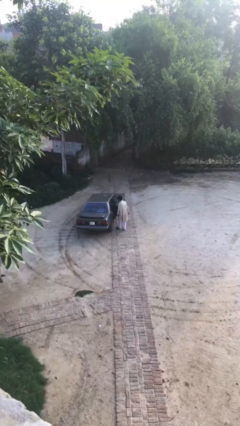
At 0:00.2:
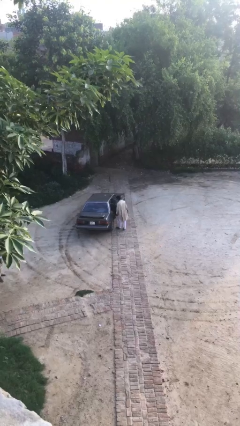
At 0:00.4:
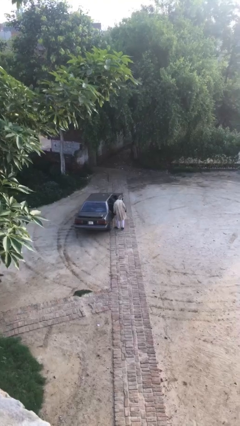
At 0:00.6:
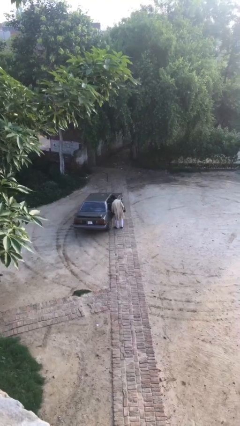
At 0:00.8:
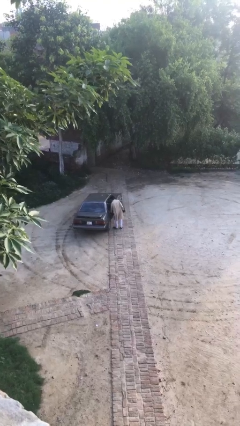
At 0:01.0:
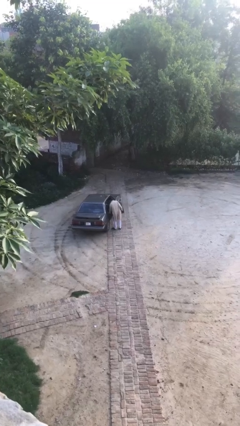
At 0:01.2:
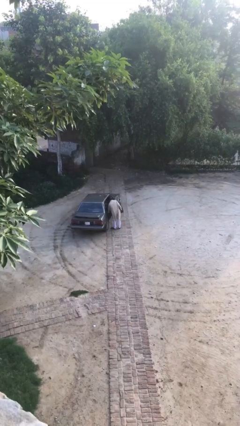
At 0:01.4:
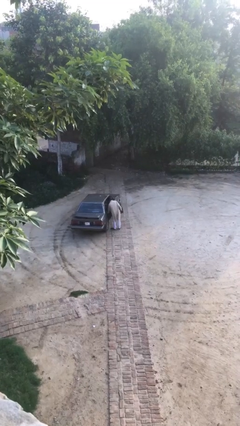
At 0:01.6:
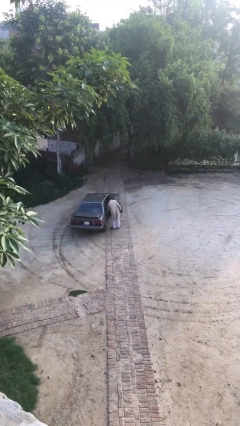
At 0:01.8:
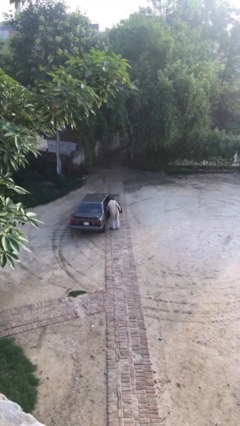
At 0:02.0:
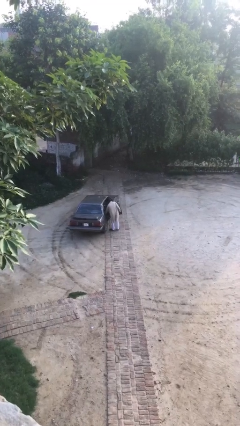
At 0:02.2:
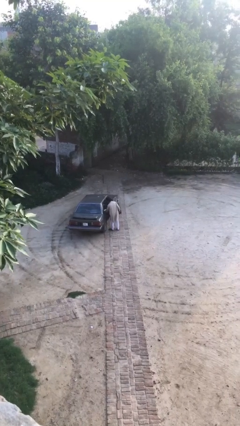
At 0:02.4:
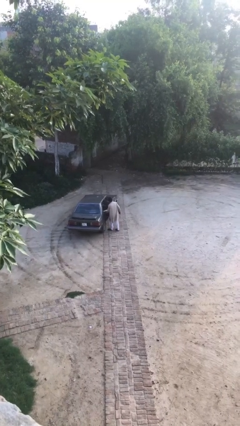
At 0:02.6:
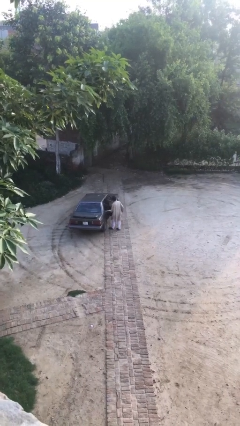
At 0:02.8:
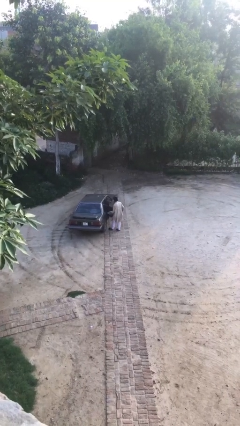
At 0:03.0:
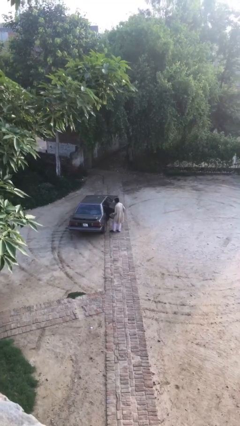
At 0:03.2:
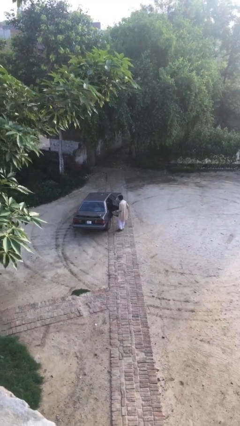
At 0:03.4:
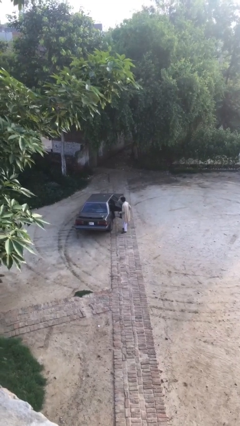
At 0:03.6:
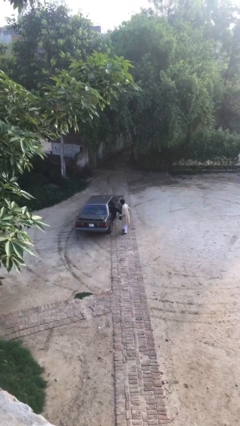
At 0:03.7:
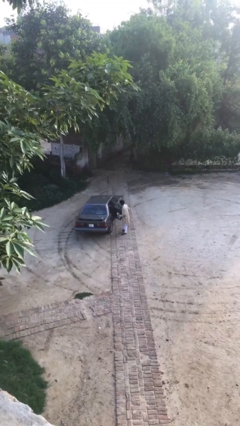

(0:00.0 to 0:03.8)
person unloads car

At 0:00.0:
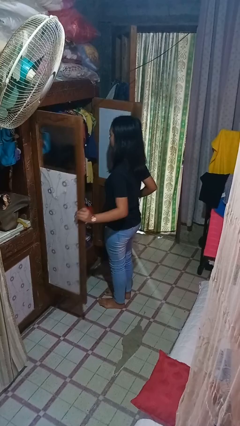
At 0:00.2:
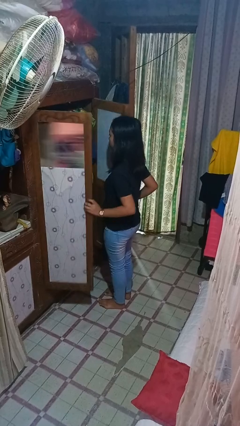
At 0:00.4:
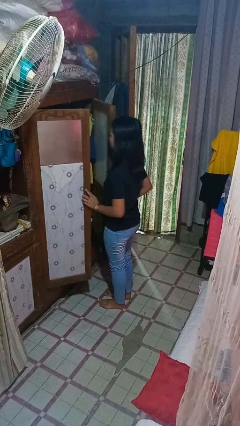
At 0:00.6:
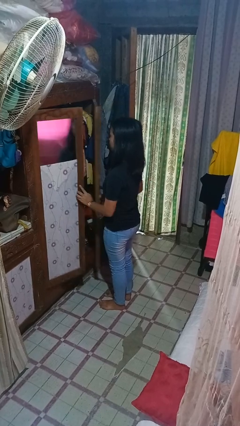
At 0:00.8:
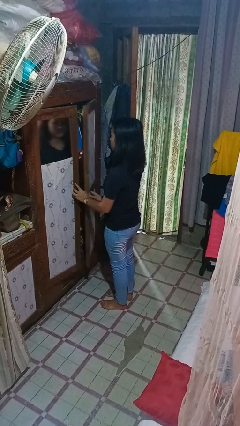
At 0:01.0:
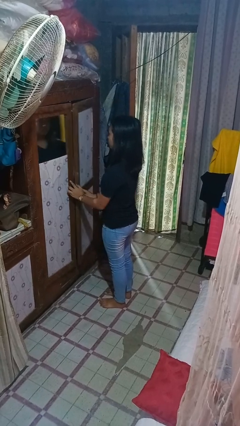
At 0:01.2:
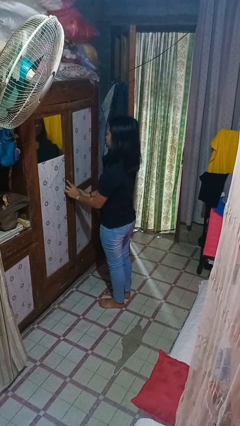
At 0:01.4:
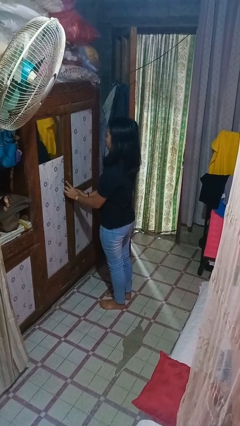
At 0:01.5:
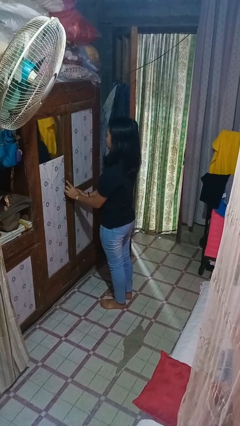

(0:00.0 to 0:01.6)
person closes closet door

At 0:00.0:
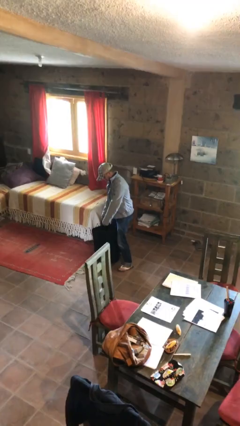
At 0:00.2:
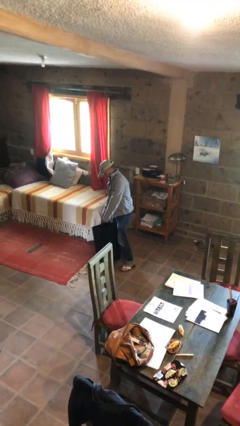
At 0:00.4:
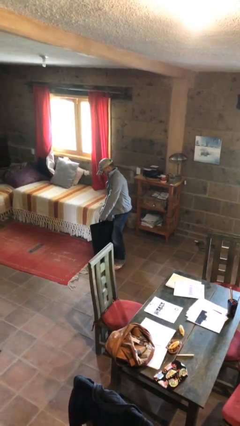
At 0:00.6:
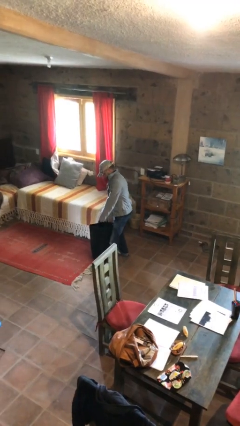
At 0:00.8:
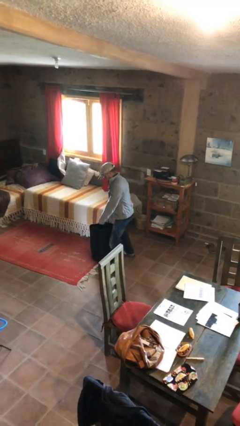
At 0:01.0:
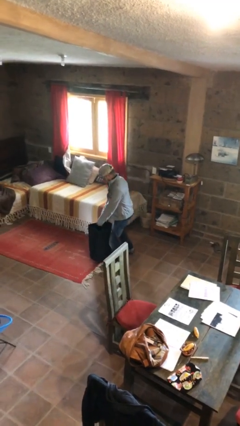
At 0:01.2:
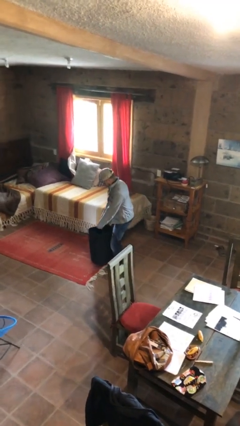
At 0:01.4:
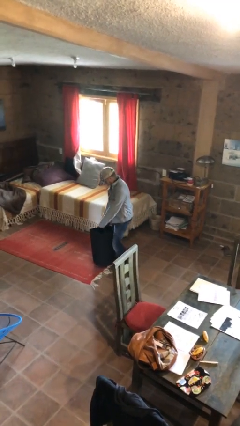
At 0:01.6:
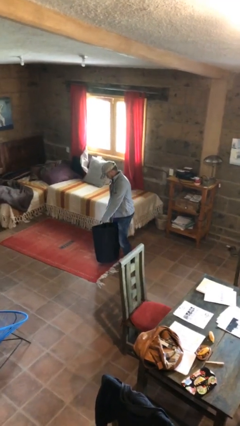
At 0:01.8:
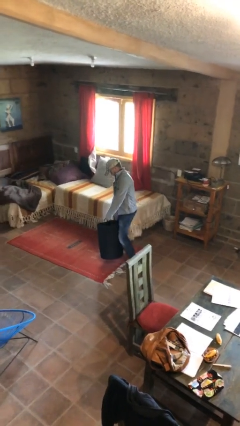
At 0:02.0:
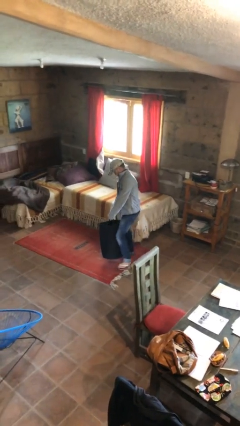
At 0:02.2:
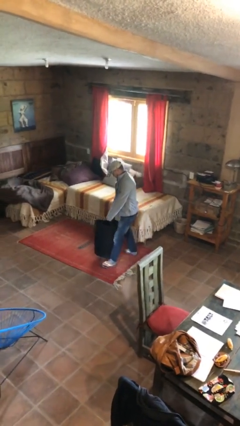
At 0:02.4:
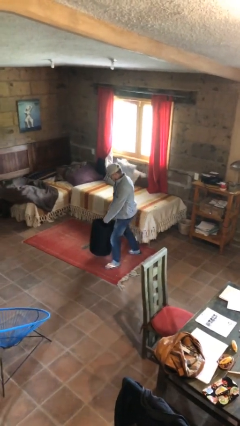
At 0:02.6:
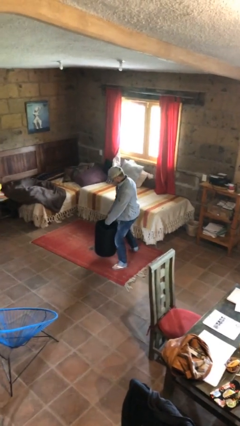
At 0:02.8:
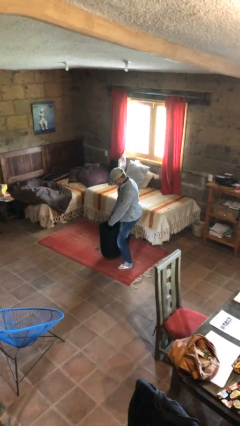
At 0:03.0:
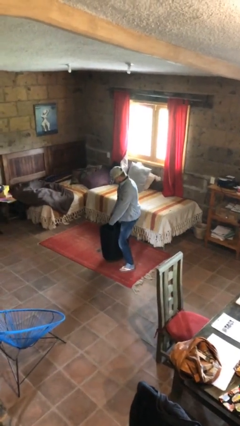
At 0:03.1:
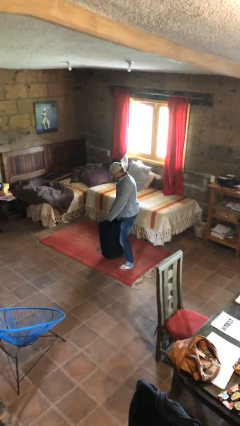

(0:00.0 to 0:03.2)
person carries heavy object

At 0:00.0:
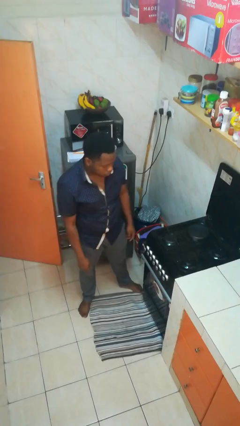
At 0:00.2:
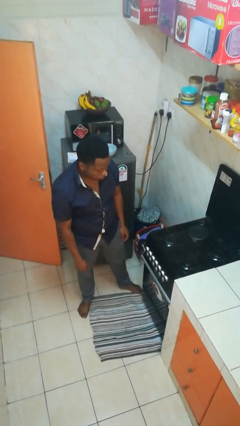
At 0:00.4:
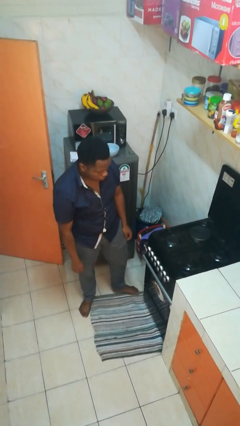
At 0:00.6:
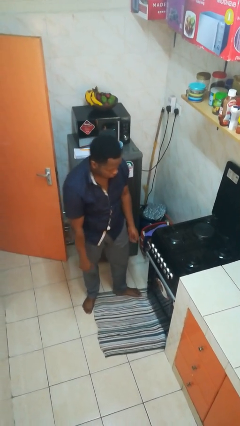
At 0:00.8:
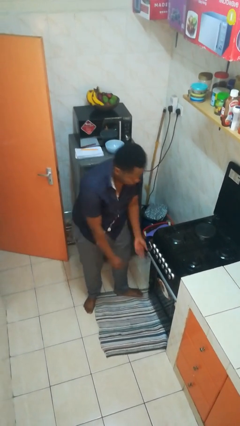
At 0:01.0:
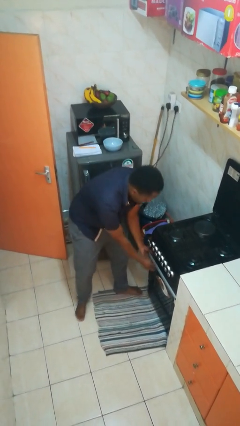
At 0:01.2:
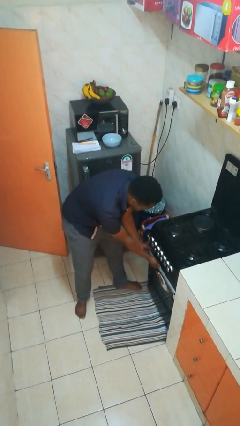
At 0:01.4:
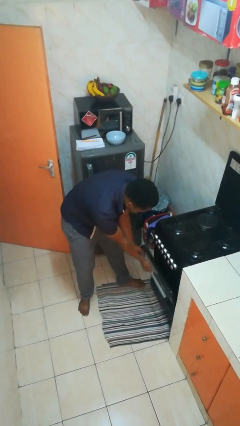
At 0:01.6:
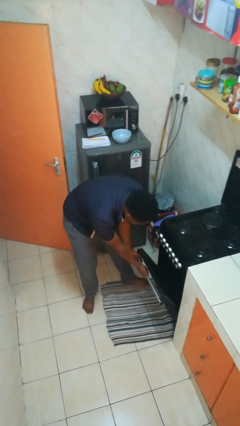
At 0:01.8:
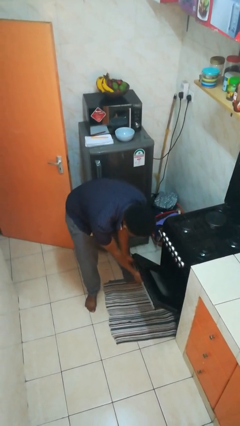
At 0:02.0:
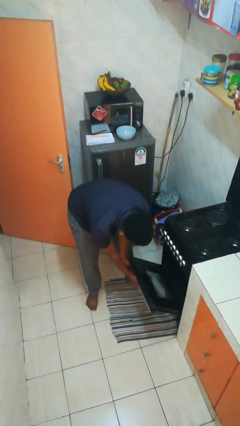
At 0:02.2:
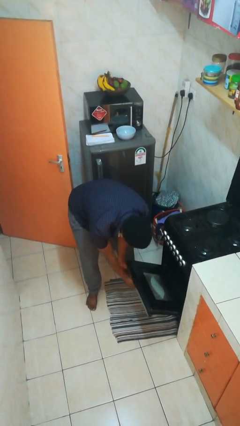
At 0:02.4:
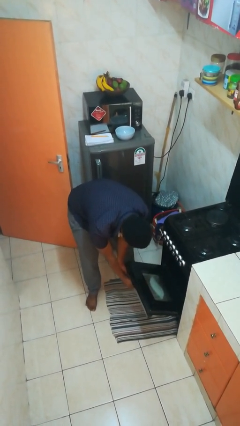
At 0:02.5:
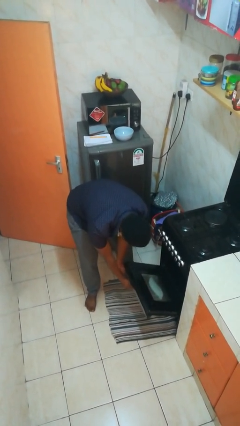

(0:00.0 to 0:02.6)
person opens oven door

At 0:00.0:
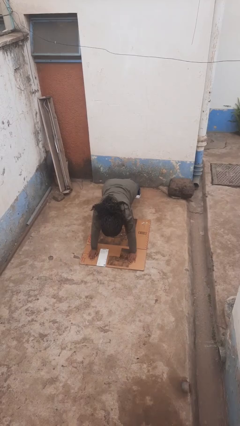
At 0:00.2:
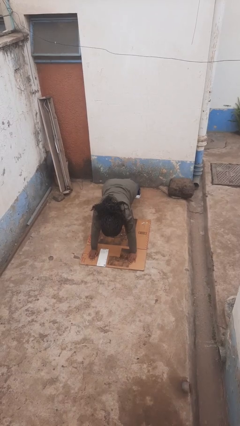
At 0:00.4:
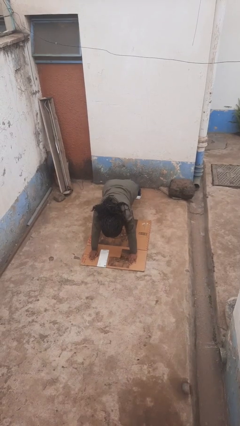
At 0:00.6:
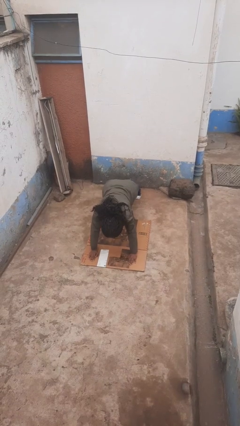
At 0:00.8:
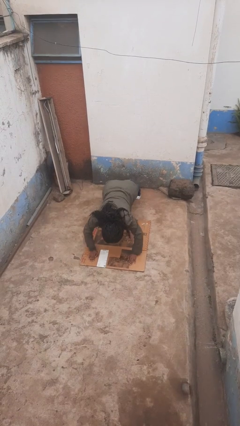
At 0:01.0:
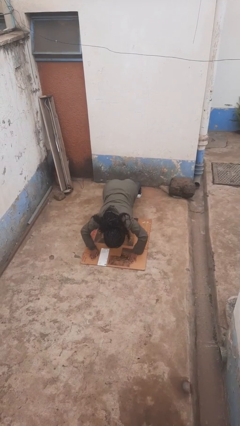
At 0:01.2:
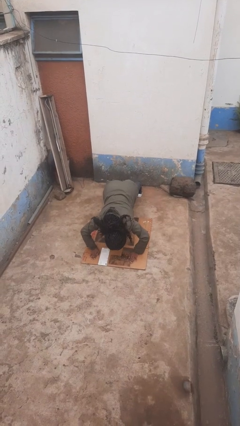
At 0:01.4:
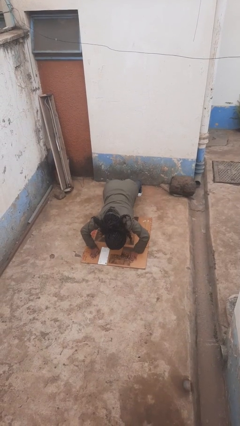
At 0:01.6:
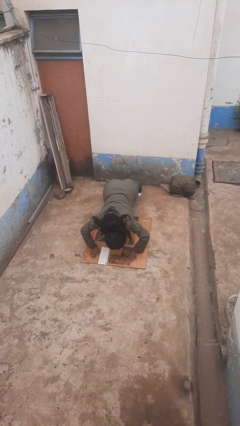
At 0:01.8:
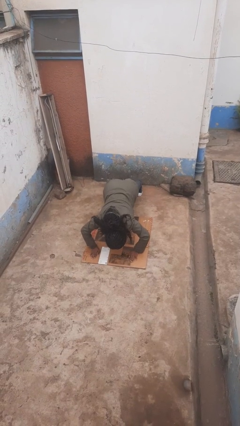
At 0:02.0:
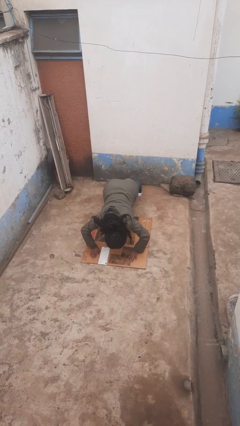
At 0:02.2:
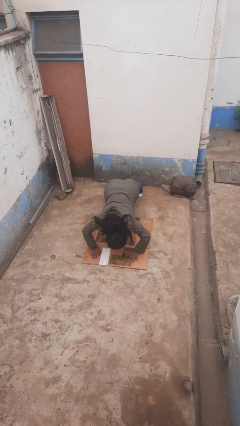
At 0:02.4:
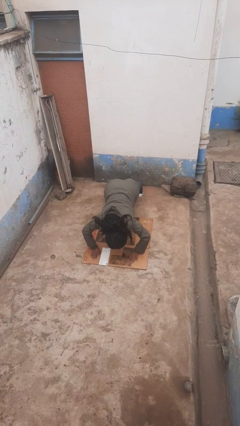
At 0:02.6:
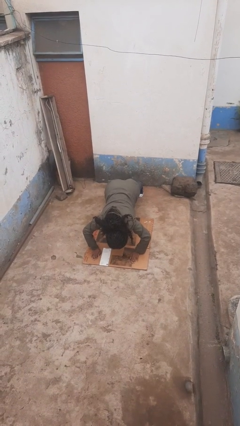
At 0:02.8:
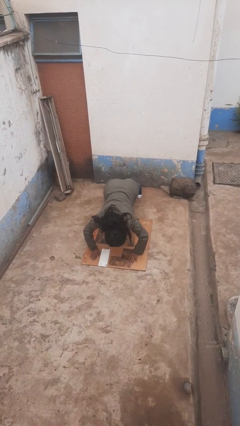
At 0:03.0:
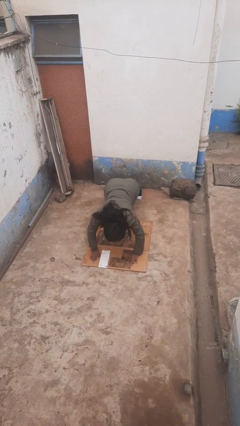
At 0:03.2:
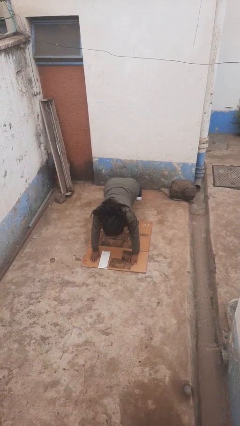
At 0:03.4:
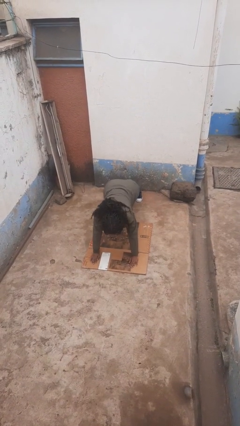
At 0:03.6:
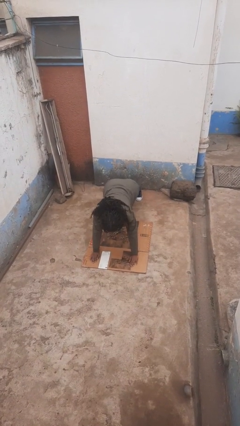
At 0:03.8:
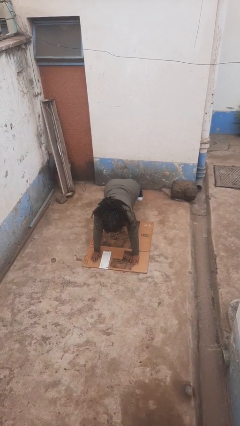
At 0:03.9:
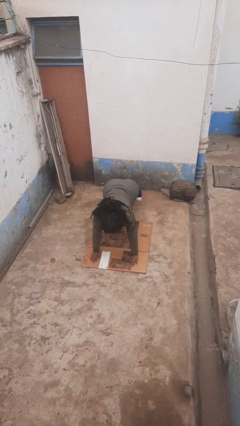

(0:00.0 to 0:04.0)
person exercises with pushup

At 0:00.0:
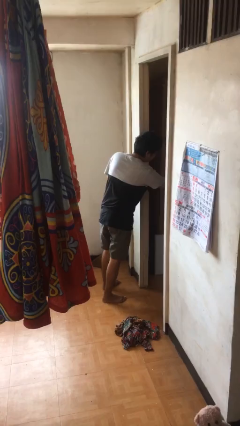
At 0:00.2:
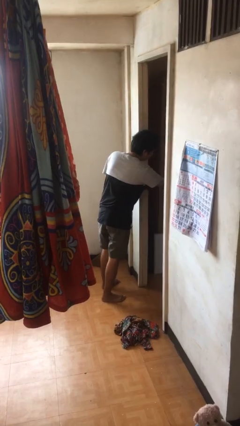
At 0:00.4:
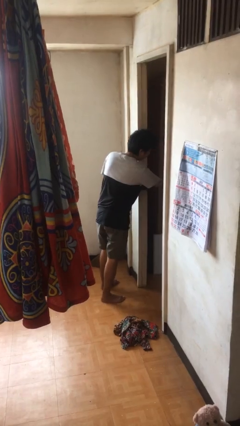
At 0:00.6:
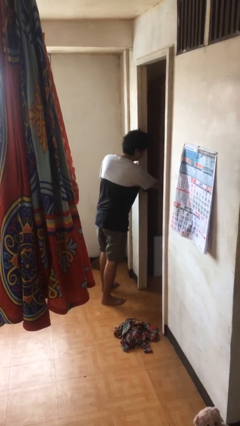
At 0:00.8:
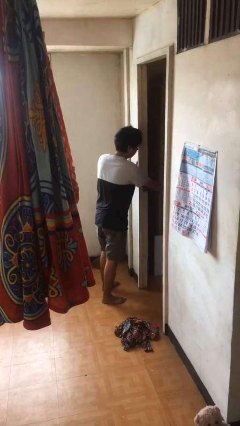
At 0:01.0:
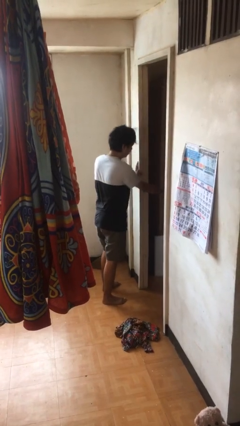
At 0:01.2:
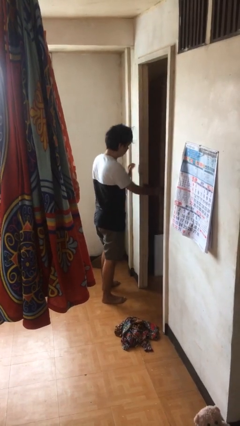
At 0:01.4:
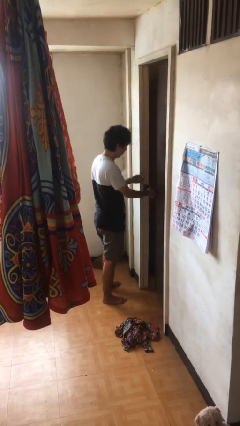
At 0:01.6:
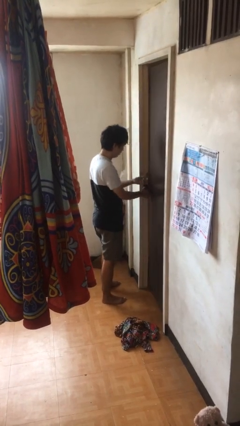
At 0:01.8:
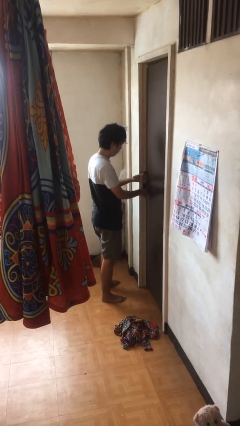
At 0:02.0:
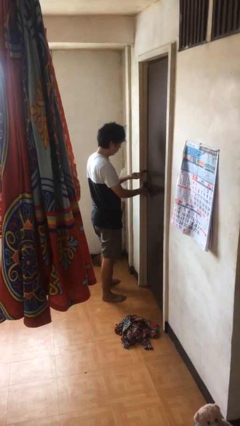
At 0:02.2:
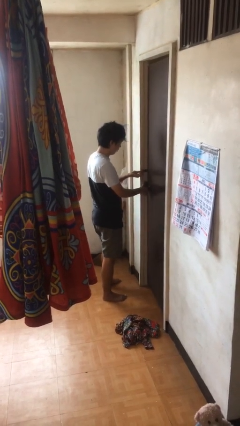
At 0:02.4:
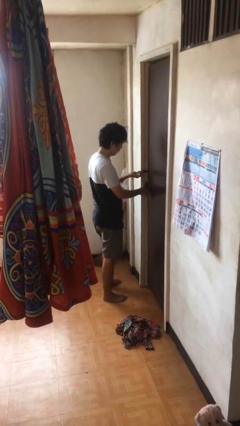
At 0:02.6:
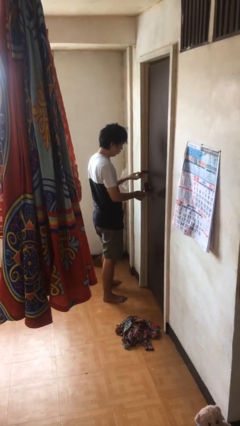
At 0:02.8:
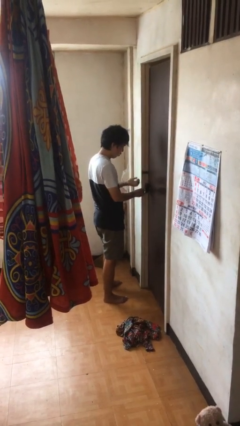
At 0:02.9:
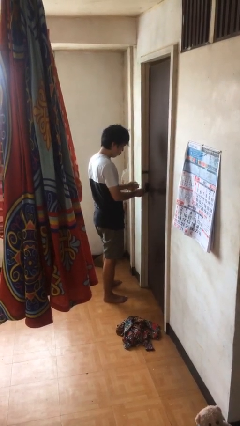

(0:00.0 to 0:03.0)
person closes facility door
